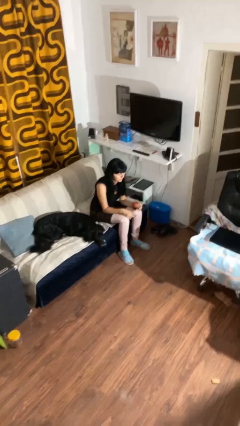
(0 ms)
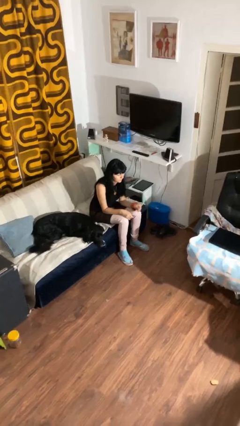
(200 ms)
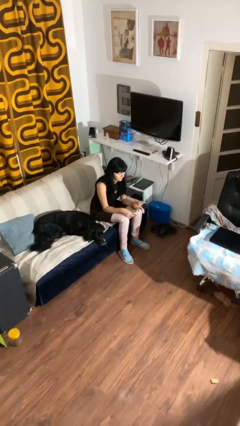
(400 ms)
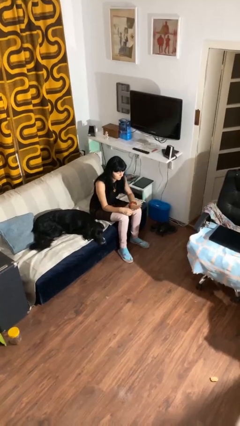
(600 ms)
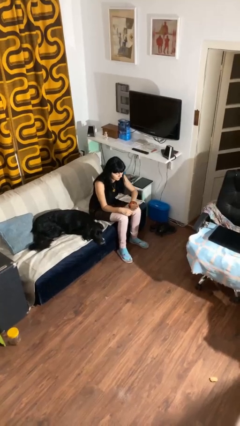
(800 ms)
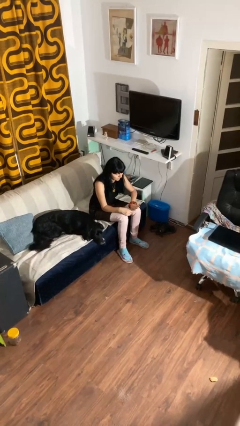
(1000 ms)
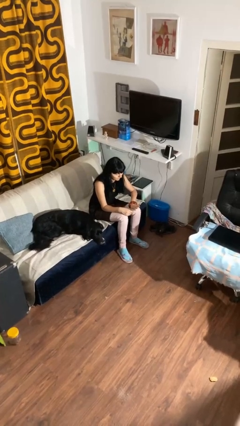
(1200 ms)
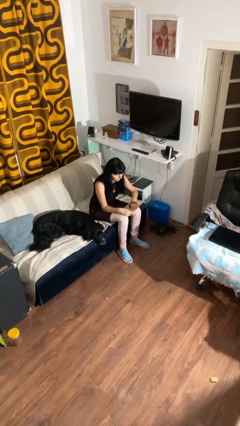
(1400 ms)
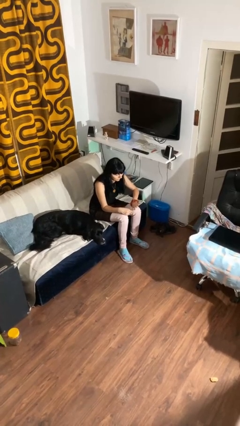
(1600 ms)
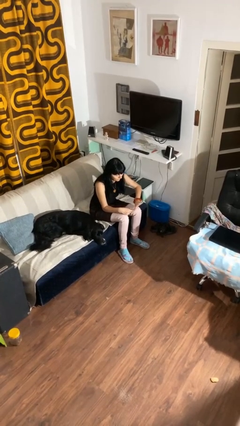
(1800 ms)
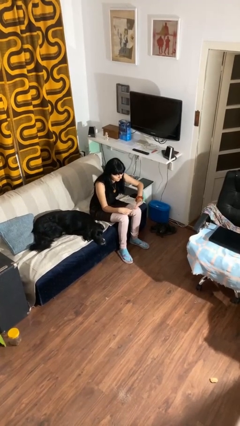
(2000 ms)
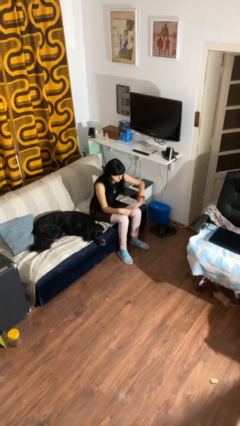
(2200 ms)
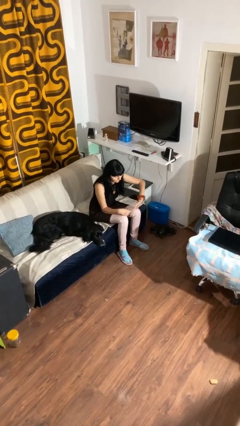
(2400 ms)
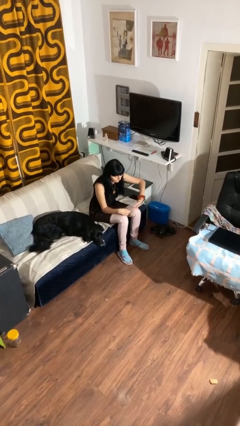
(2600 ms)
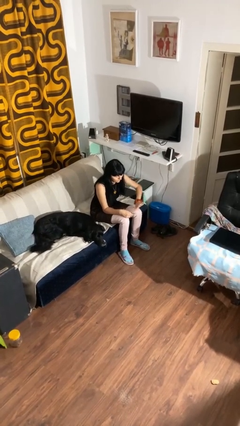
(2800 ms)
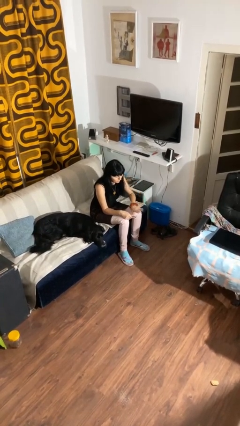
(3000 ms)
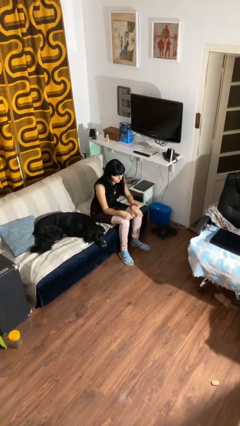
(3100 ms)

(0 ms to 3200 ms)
person clips fingernails

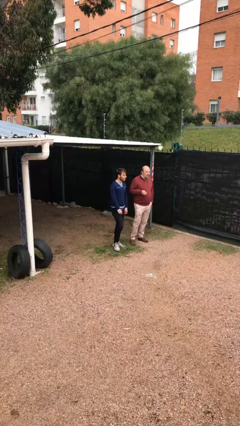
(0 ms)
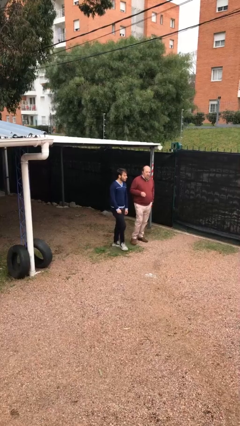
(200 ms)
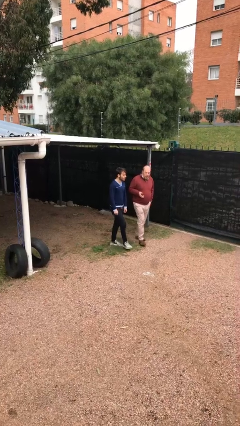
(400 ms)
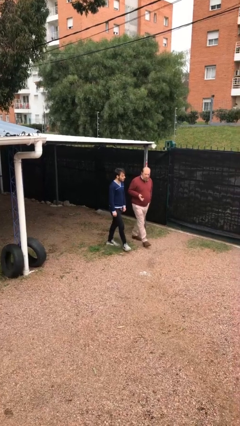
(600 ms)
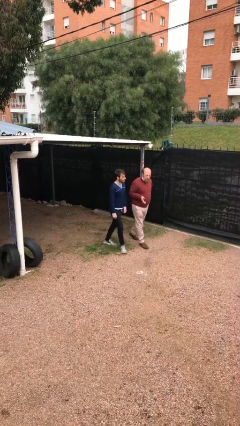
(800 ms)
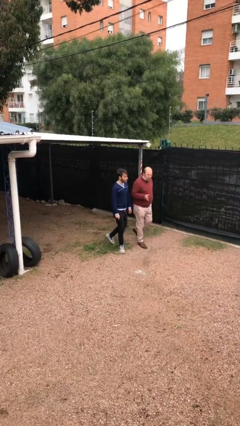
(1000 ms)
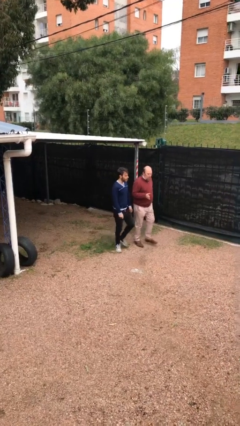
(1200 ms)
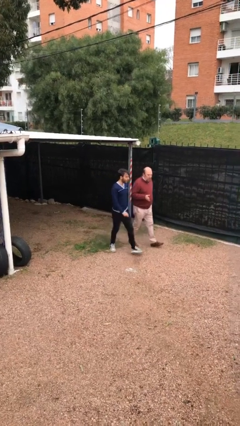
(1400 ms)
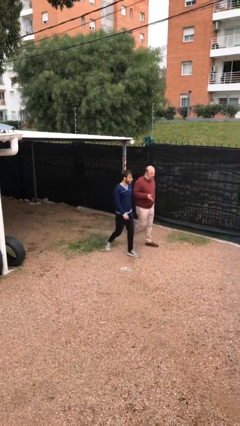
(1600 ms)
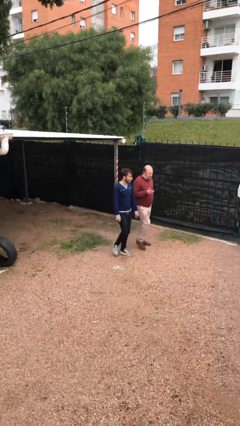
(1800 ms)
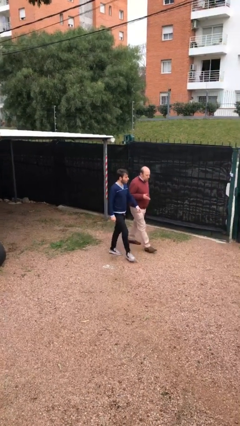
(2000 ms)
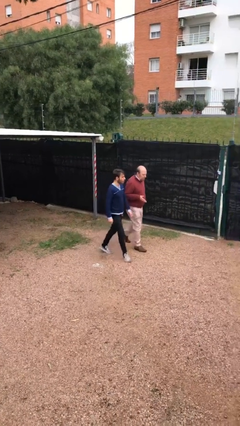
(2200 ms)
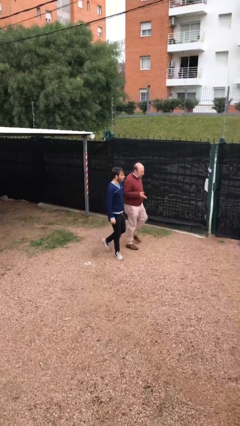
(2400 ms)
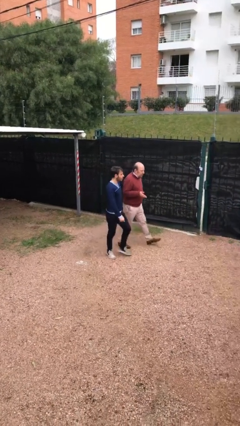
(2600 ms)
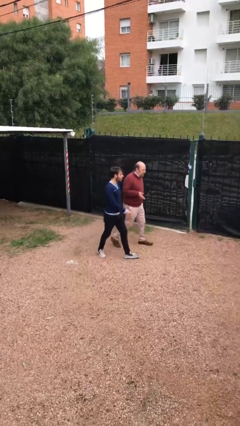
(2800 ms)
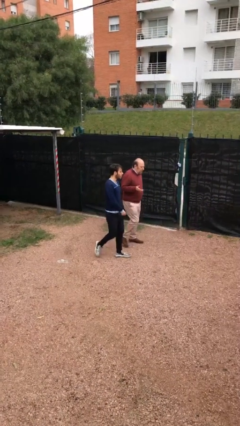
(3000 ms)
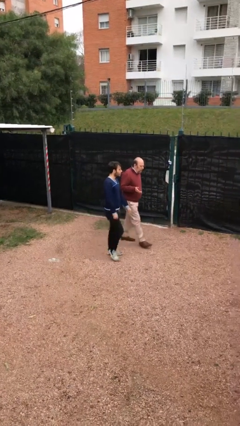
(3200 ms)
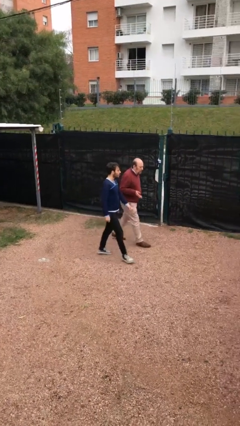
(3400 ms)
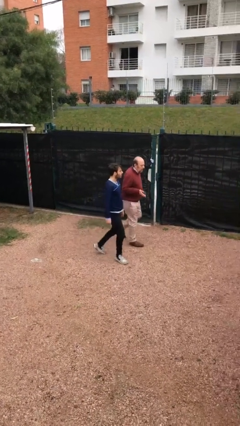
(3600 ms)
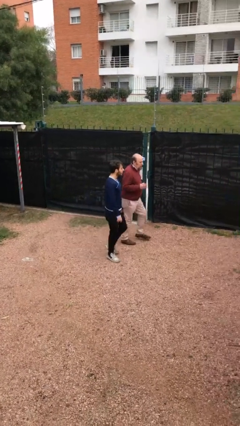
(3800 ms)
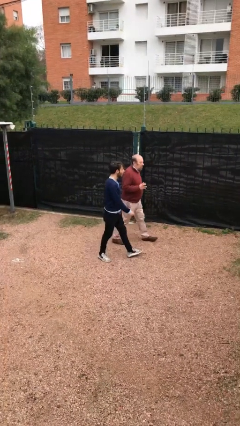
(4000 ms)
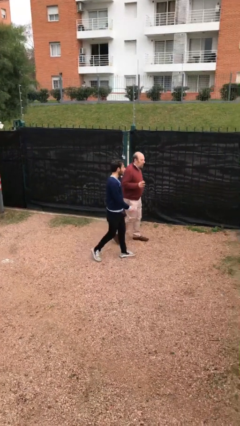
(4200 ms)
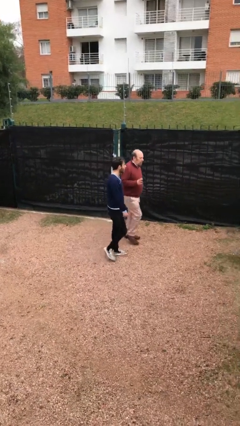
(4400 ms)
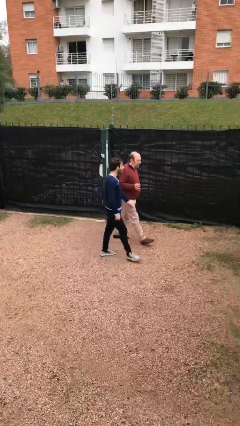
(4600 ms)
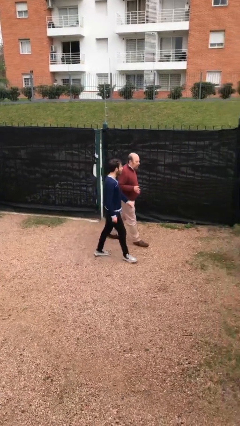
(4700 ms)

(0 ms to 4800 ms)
person talks to person

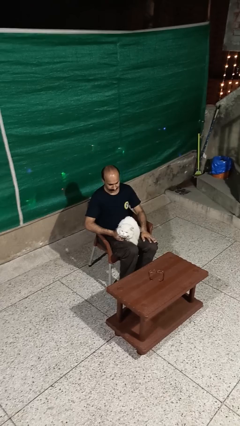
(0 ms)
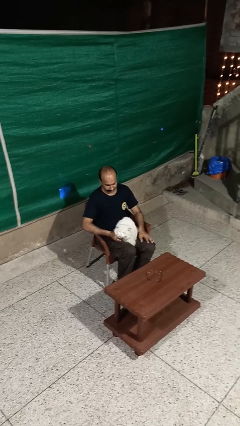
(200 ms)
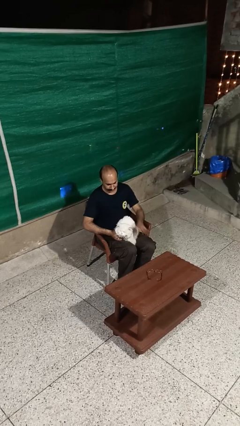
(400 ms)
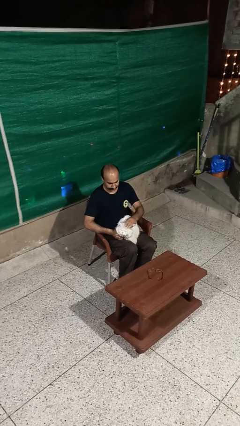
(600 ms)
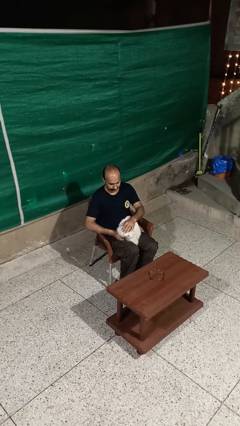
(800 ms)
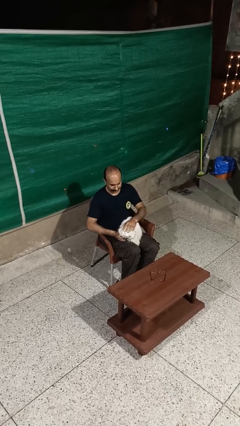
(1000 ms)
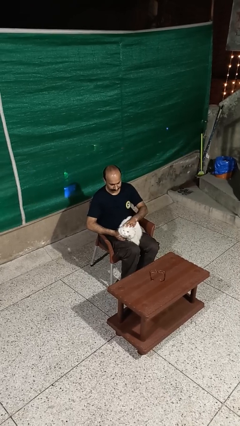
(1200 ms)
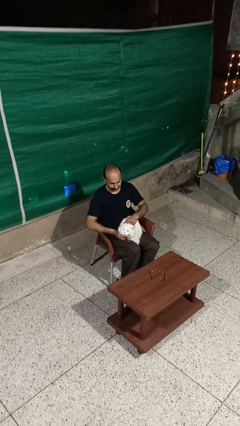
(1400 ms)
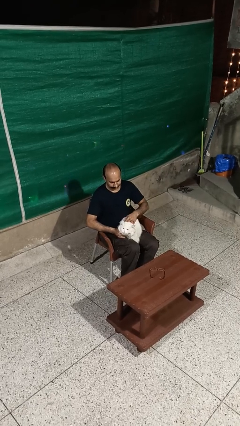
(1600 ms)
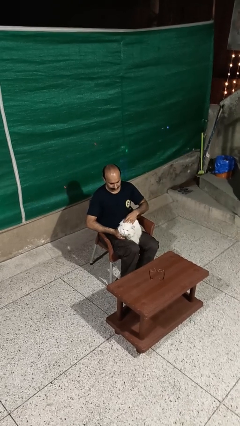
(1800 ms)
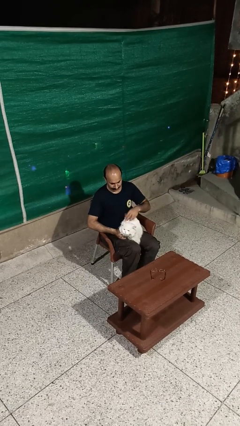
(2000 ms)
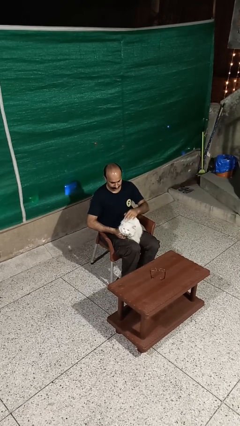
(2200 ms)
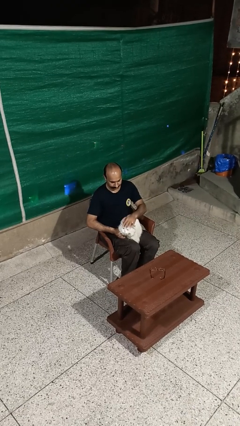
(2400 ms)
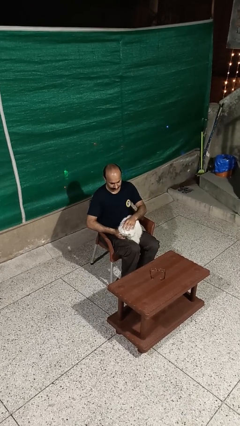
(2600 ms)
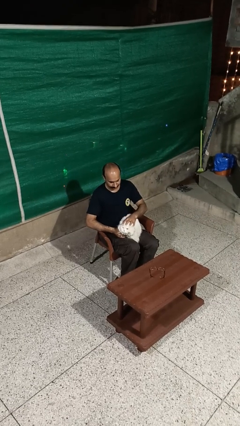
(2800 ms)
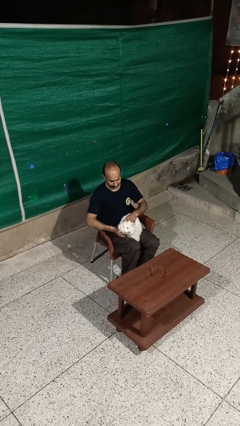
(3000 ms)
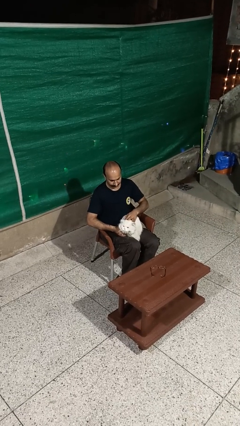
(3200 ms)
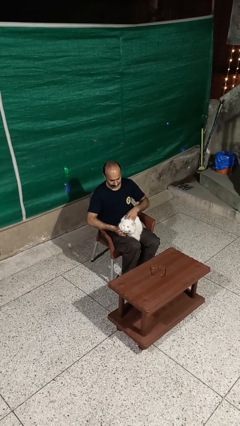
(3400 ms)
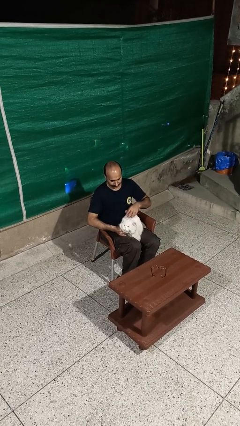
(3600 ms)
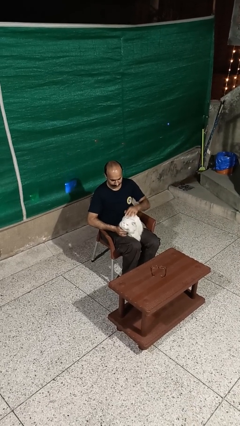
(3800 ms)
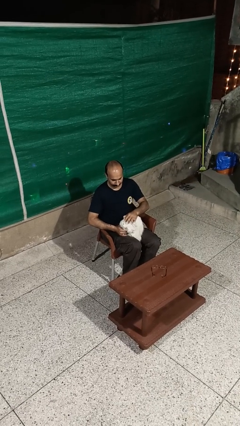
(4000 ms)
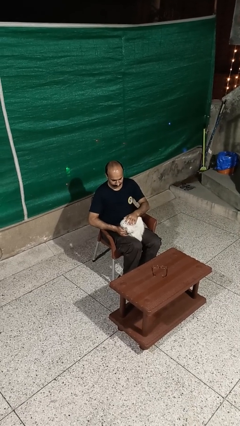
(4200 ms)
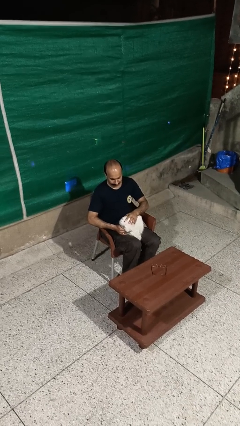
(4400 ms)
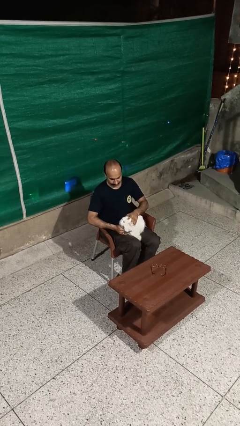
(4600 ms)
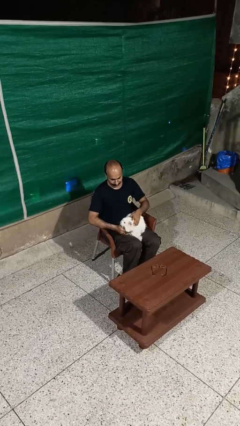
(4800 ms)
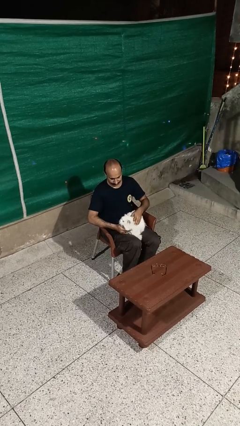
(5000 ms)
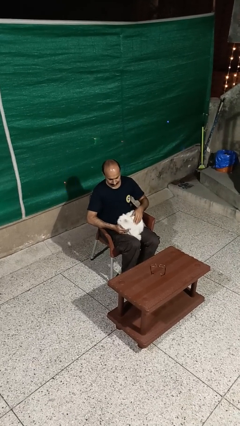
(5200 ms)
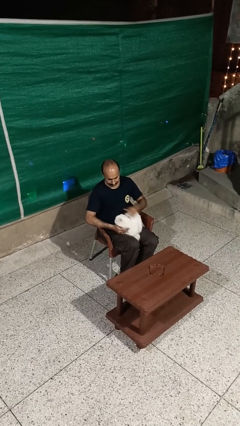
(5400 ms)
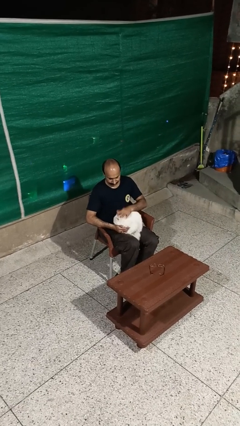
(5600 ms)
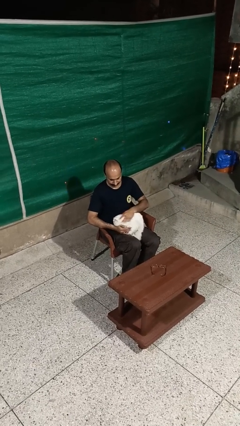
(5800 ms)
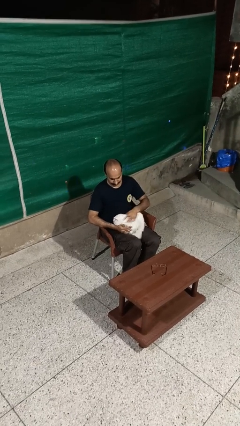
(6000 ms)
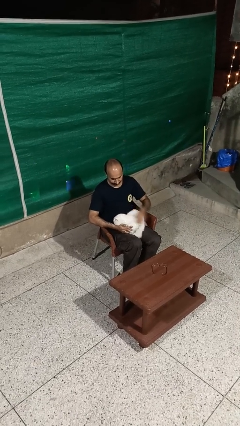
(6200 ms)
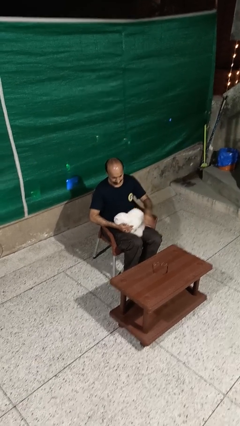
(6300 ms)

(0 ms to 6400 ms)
person pets cat

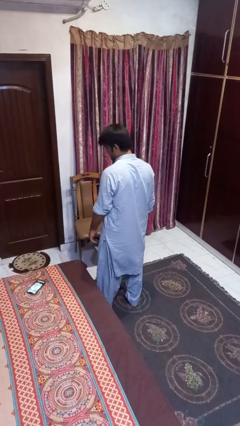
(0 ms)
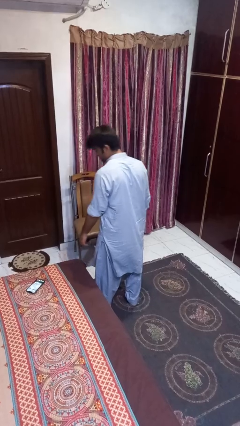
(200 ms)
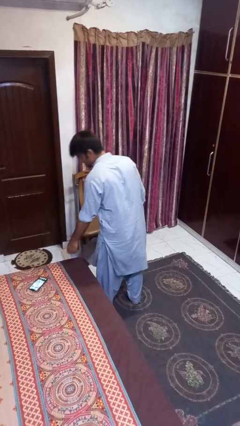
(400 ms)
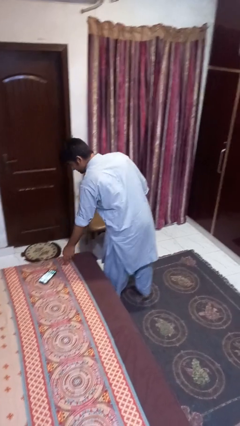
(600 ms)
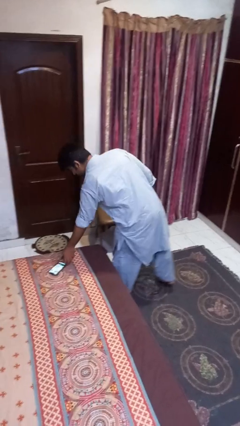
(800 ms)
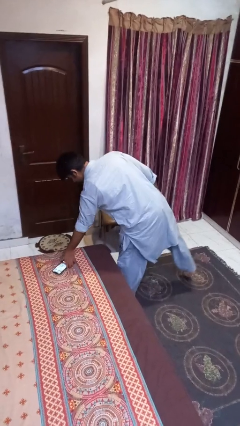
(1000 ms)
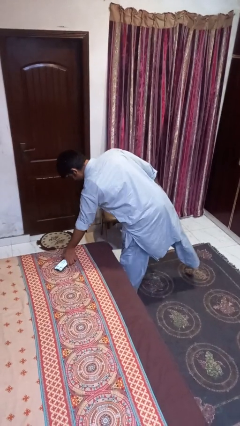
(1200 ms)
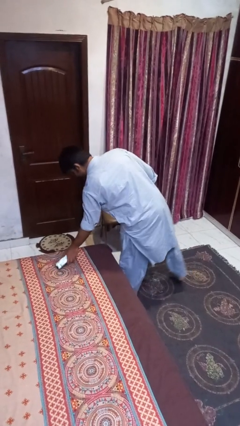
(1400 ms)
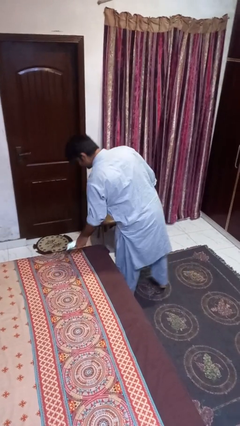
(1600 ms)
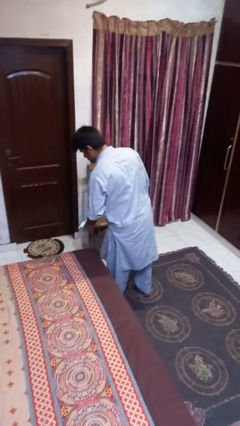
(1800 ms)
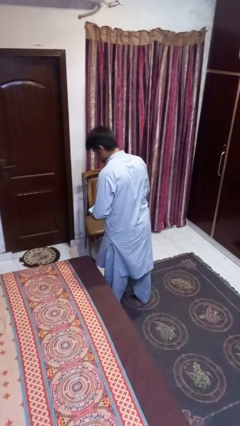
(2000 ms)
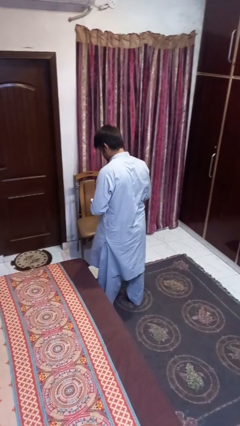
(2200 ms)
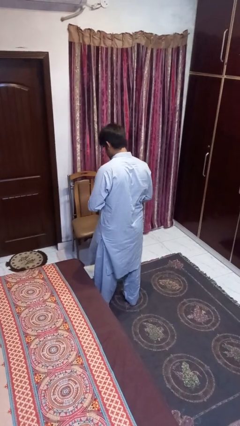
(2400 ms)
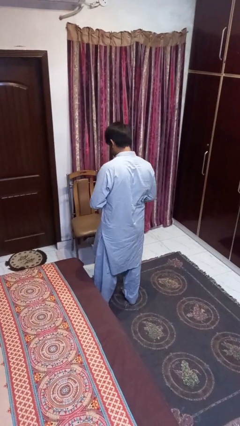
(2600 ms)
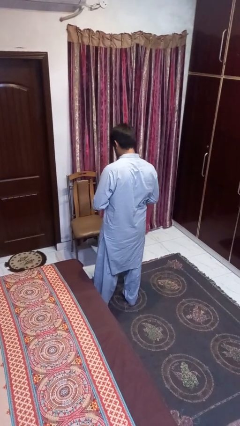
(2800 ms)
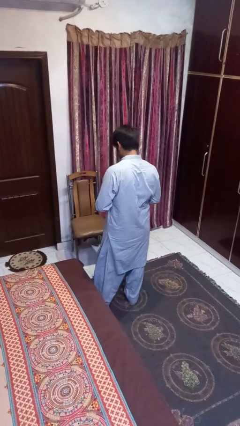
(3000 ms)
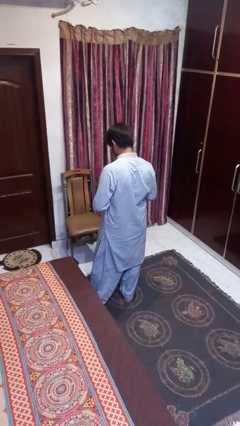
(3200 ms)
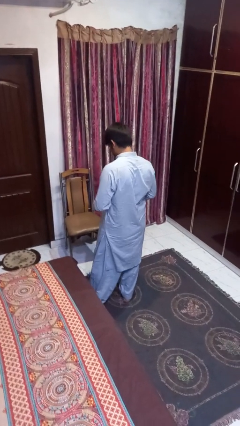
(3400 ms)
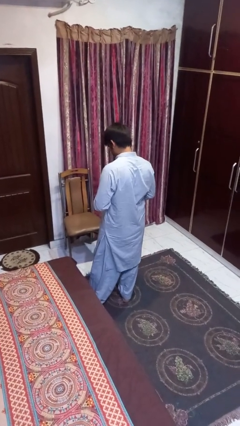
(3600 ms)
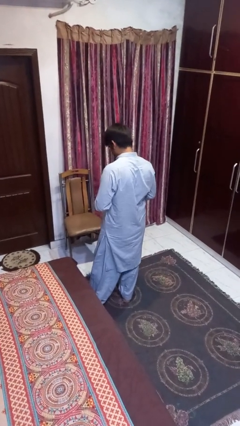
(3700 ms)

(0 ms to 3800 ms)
person picks up object from bed
